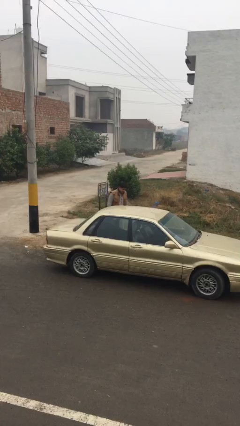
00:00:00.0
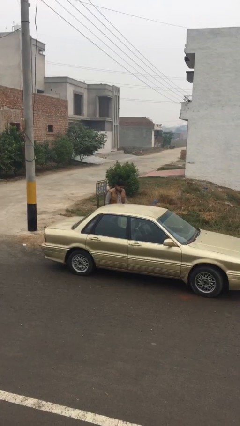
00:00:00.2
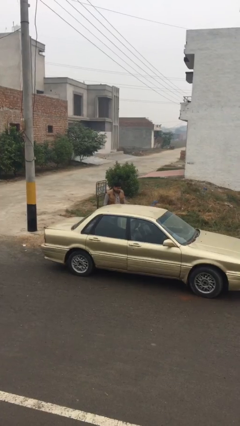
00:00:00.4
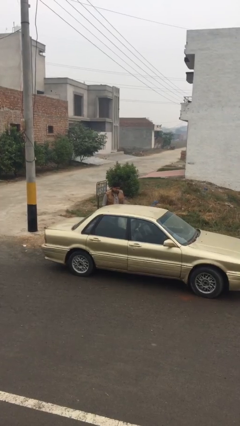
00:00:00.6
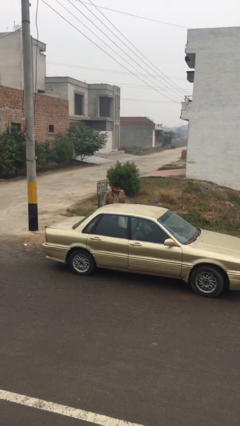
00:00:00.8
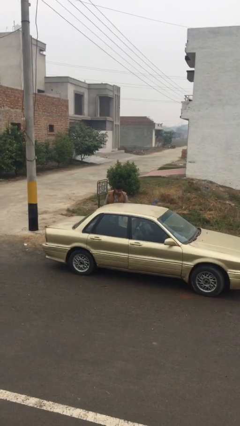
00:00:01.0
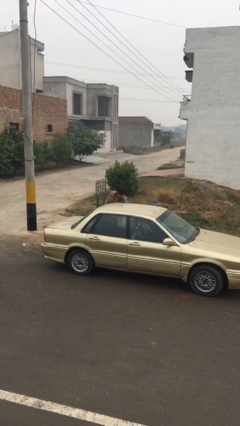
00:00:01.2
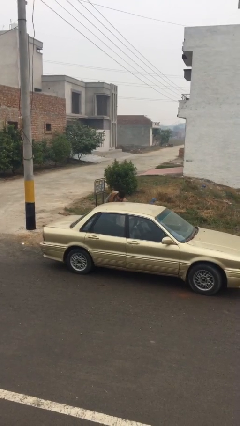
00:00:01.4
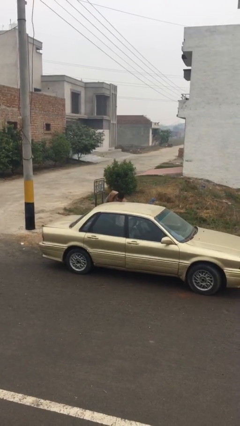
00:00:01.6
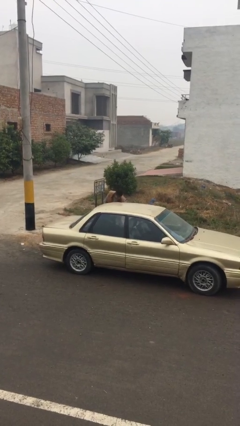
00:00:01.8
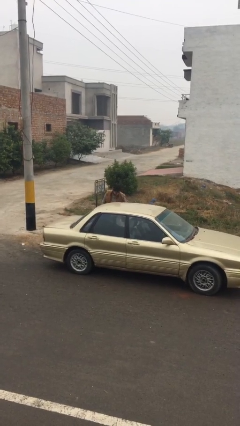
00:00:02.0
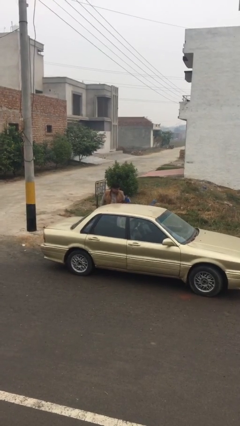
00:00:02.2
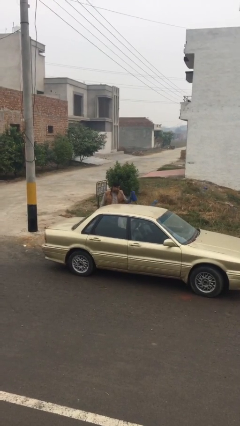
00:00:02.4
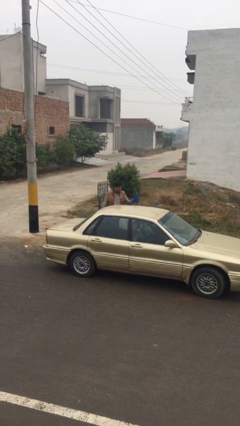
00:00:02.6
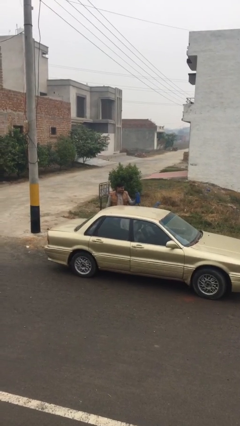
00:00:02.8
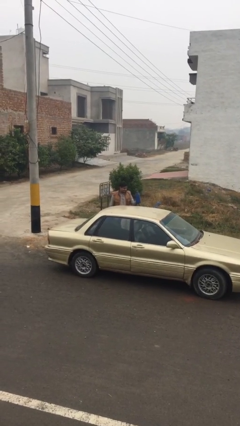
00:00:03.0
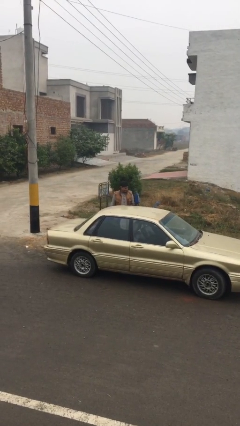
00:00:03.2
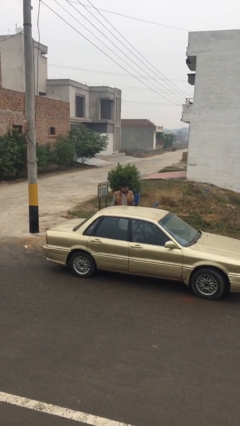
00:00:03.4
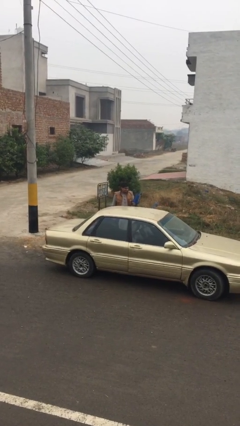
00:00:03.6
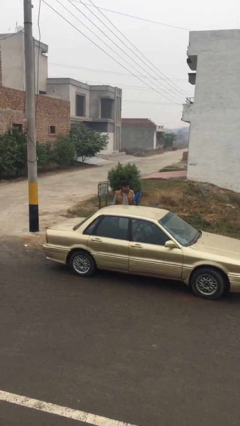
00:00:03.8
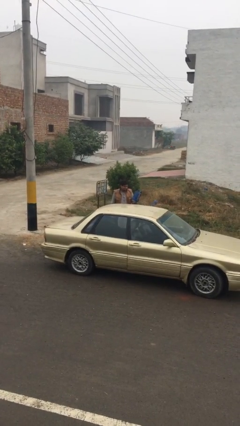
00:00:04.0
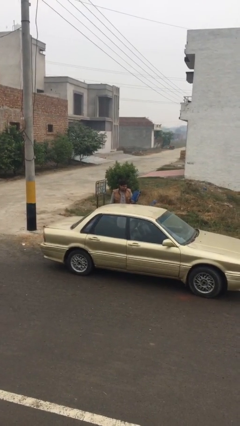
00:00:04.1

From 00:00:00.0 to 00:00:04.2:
person unloads car

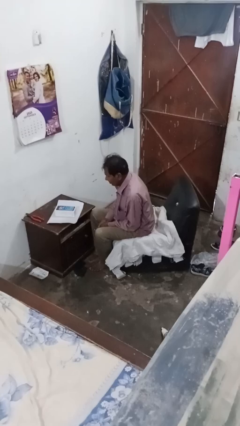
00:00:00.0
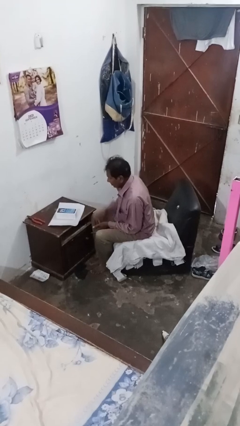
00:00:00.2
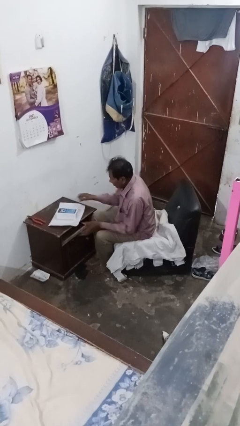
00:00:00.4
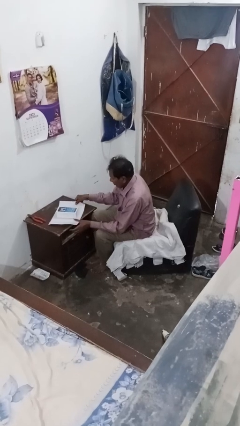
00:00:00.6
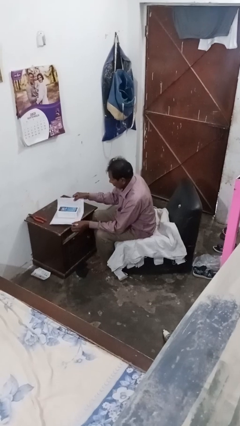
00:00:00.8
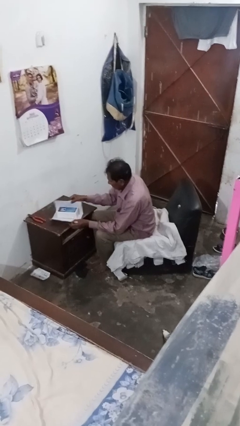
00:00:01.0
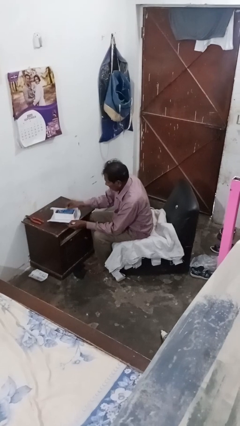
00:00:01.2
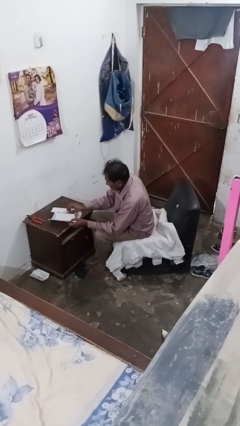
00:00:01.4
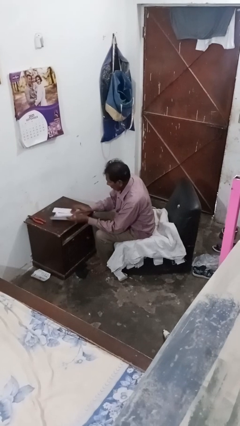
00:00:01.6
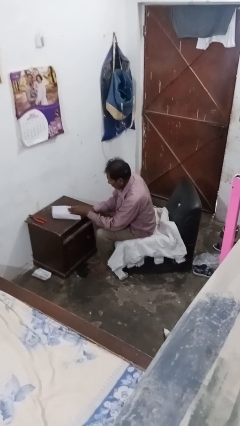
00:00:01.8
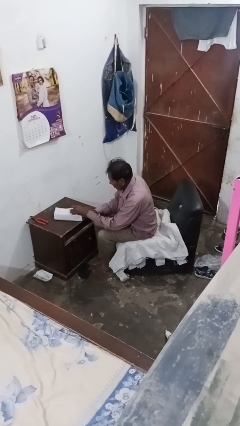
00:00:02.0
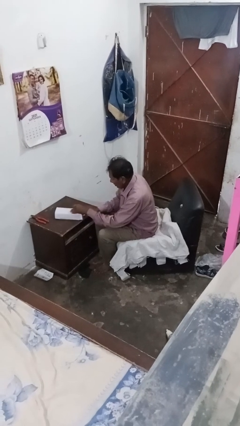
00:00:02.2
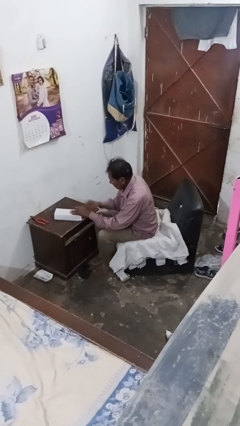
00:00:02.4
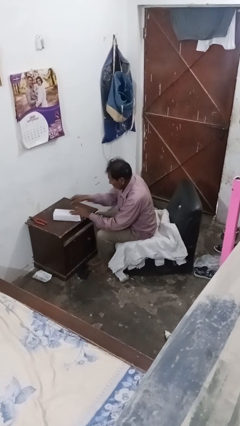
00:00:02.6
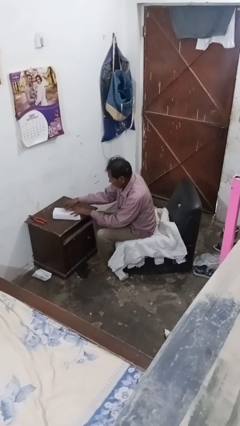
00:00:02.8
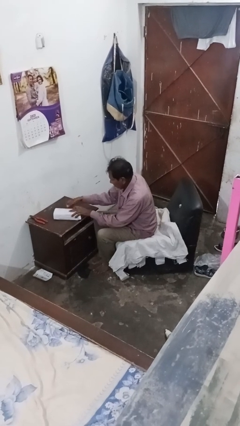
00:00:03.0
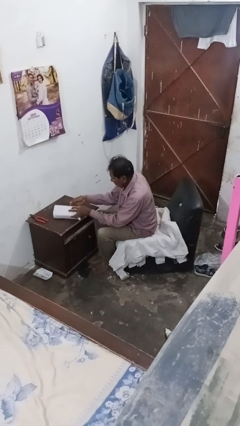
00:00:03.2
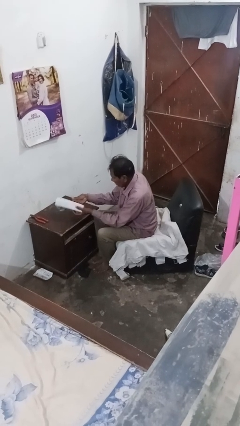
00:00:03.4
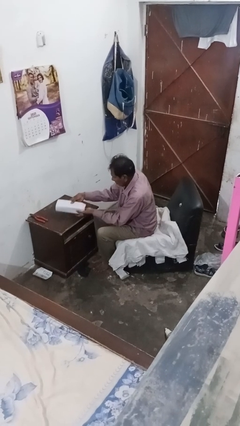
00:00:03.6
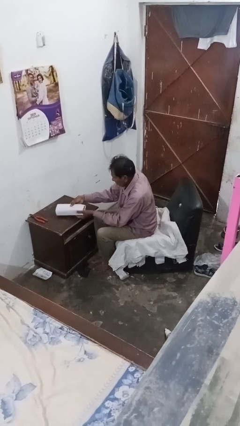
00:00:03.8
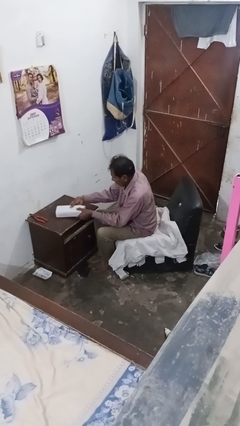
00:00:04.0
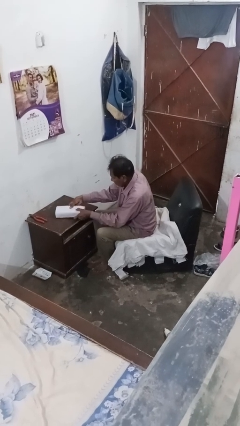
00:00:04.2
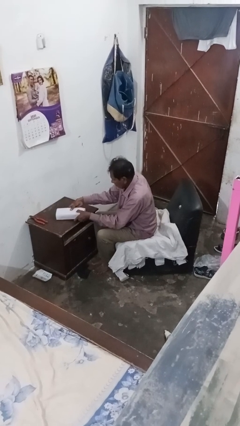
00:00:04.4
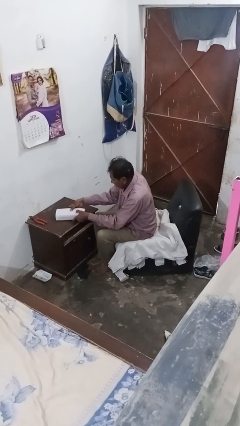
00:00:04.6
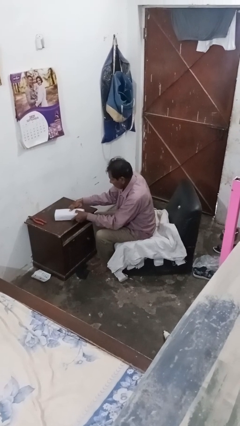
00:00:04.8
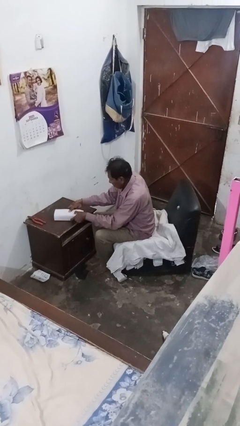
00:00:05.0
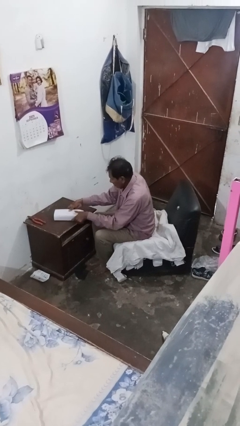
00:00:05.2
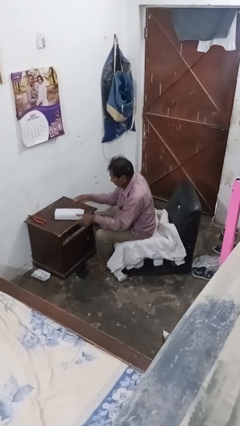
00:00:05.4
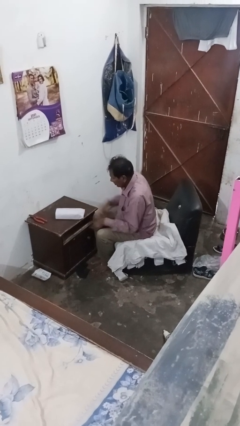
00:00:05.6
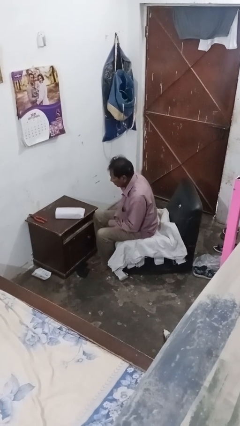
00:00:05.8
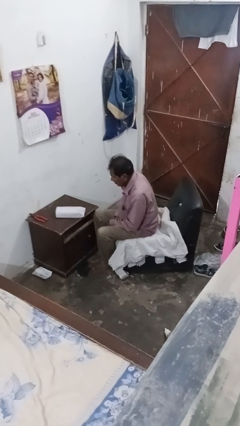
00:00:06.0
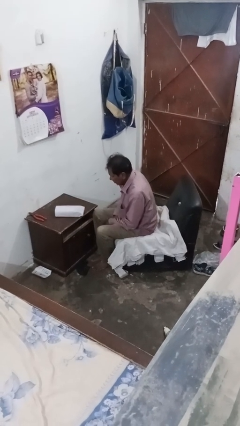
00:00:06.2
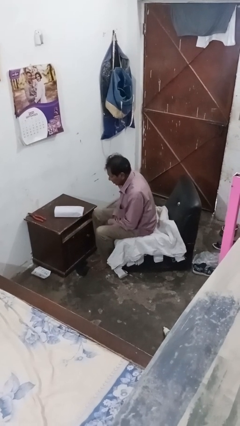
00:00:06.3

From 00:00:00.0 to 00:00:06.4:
person wraps box

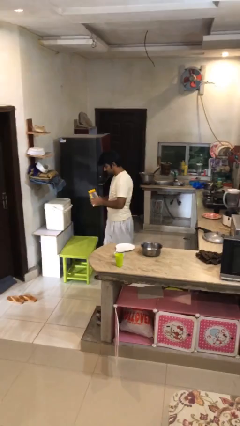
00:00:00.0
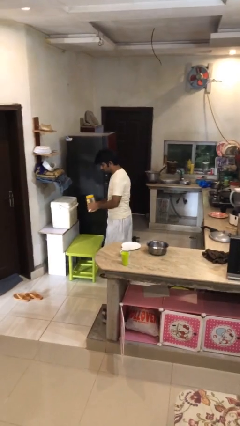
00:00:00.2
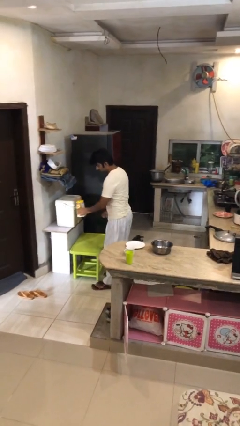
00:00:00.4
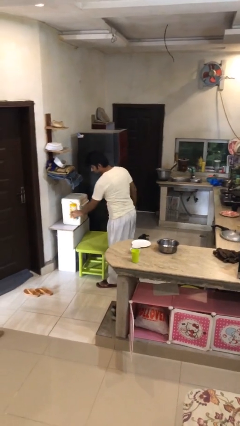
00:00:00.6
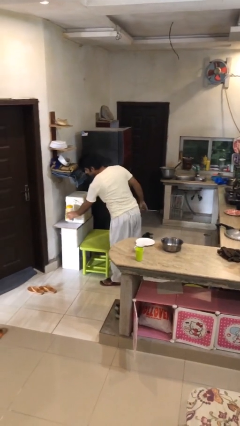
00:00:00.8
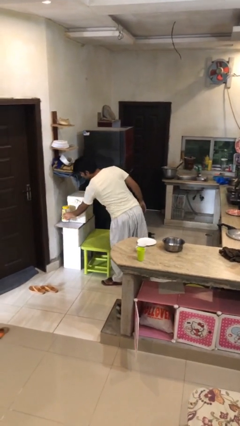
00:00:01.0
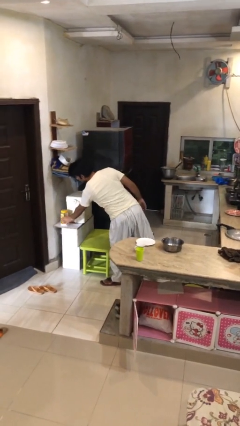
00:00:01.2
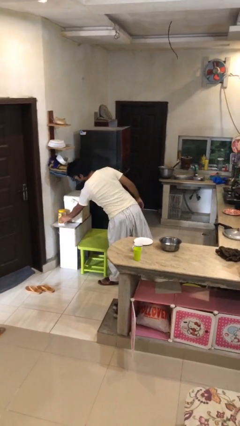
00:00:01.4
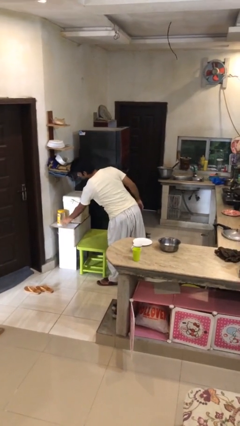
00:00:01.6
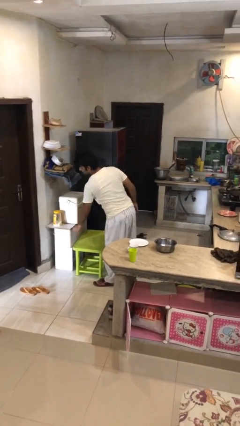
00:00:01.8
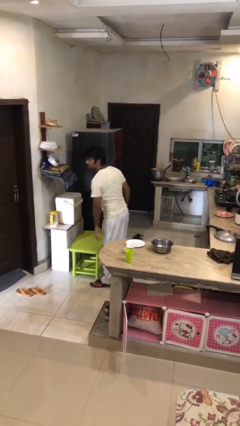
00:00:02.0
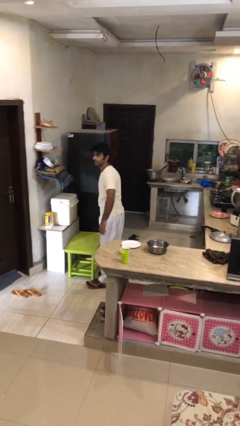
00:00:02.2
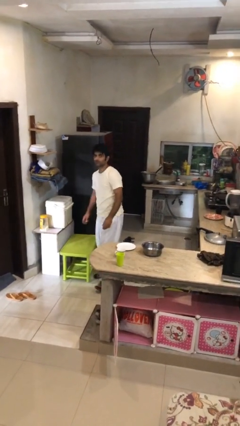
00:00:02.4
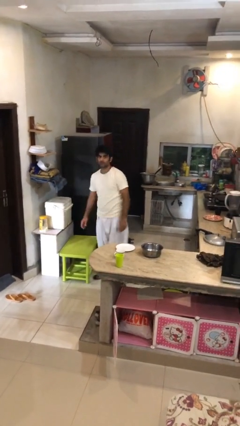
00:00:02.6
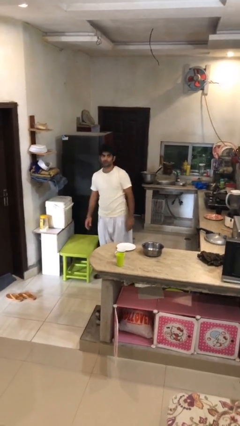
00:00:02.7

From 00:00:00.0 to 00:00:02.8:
person puts down object on table

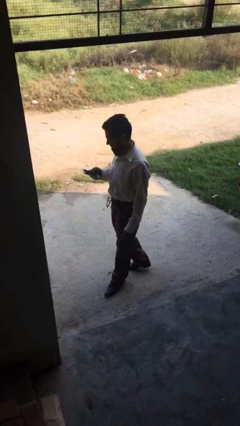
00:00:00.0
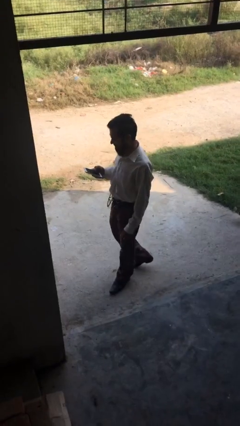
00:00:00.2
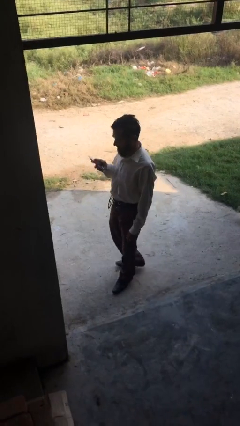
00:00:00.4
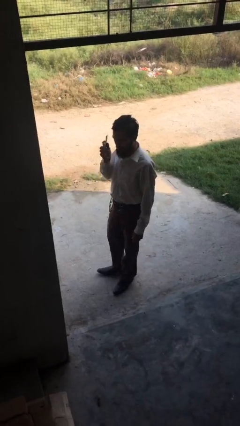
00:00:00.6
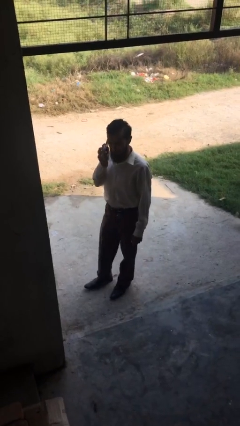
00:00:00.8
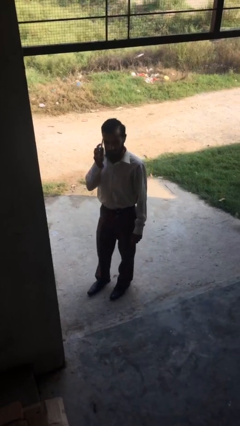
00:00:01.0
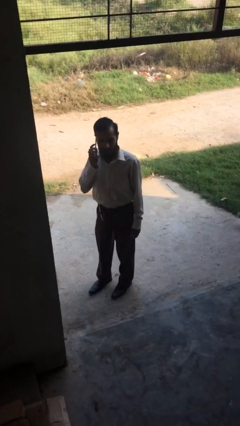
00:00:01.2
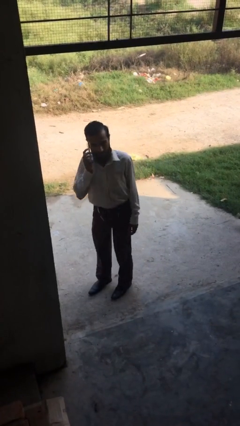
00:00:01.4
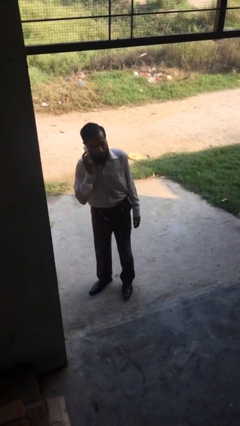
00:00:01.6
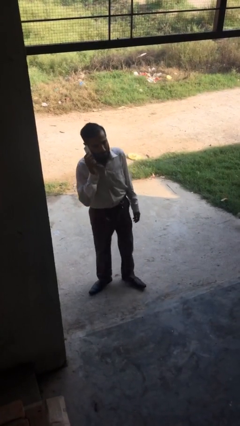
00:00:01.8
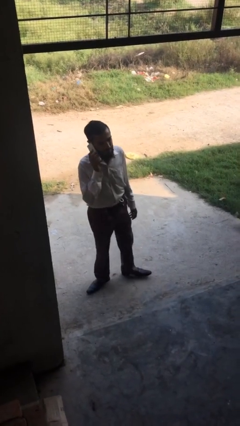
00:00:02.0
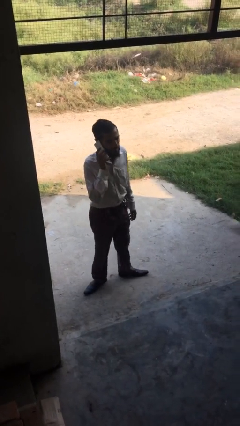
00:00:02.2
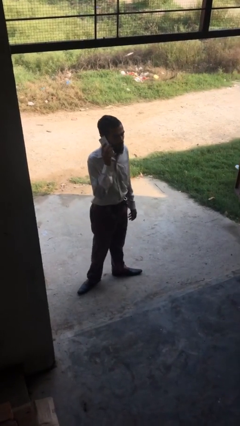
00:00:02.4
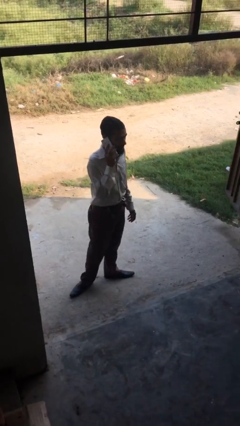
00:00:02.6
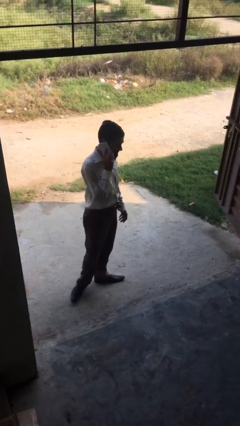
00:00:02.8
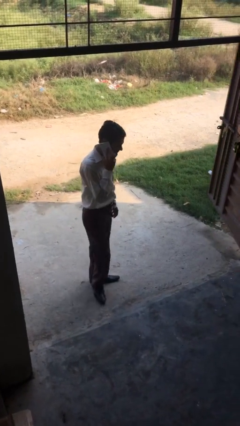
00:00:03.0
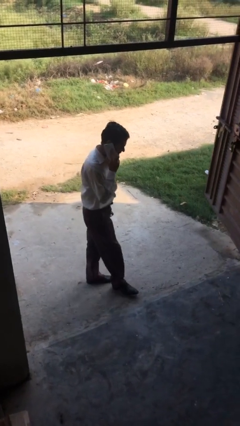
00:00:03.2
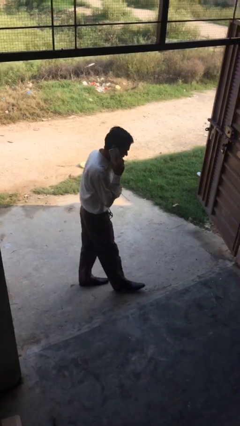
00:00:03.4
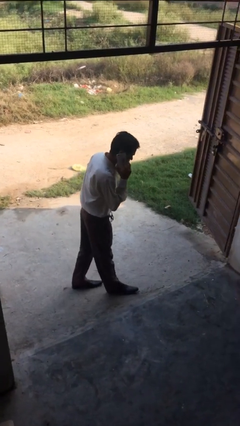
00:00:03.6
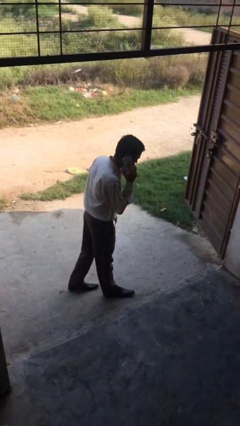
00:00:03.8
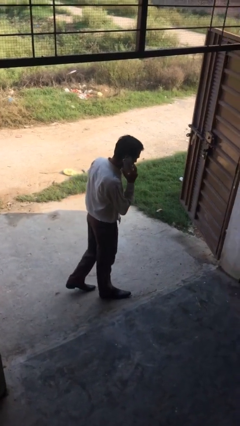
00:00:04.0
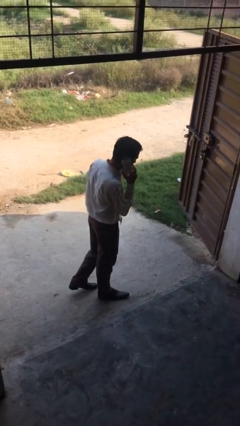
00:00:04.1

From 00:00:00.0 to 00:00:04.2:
person talks on phone

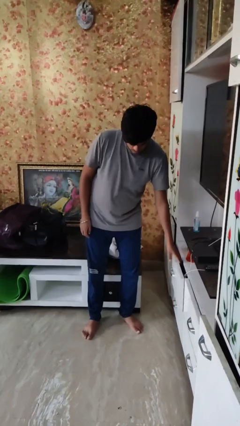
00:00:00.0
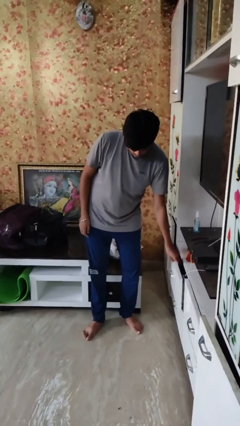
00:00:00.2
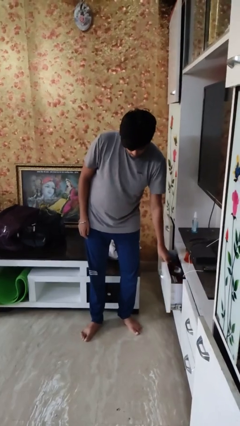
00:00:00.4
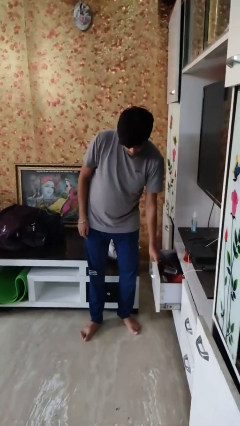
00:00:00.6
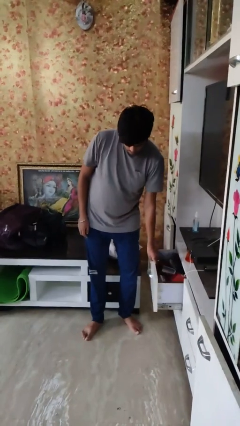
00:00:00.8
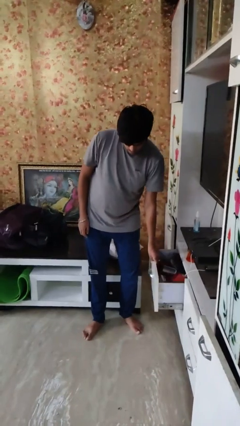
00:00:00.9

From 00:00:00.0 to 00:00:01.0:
person opens kitchen drawer
